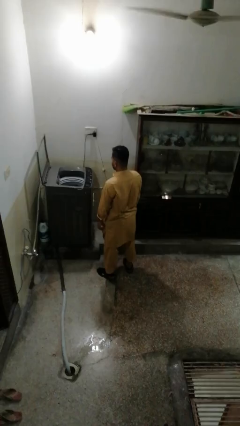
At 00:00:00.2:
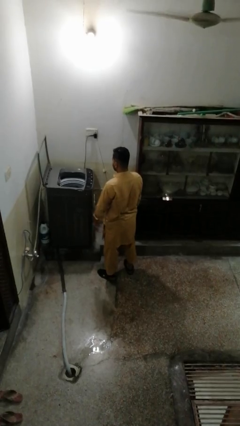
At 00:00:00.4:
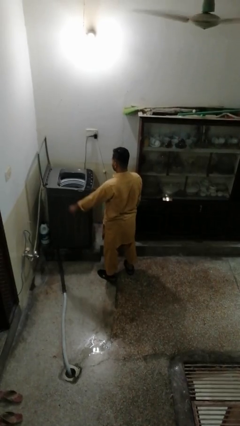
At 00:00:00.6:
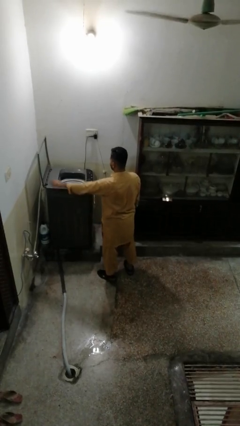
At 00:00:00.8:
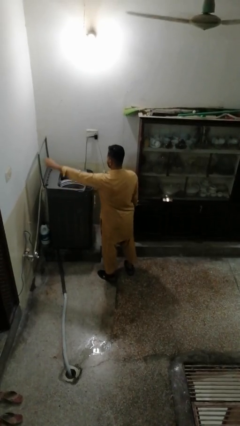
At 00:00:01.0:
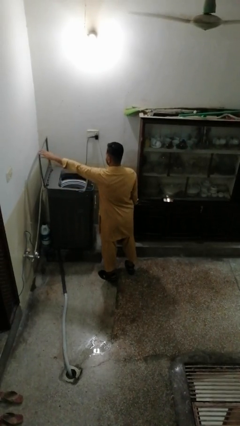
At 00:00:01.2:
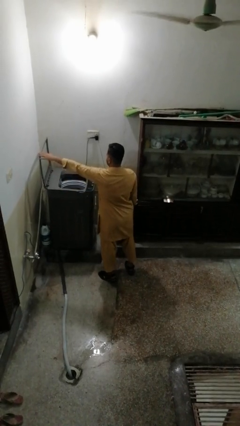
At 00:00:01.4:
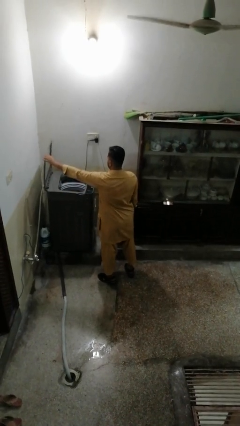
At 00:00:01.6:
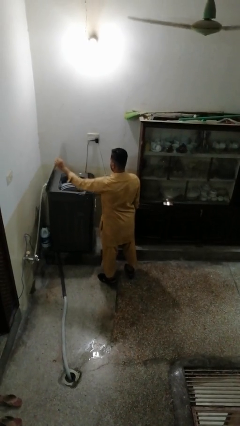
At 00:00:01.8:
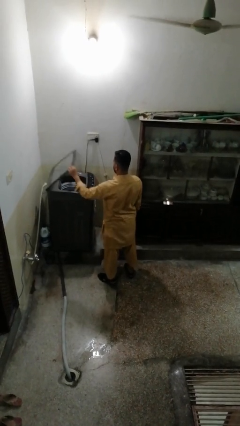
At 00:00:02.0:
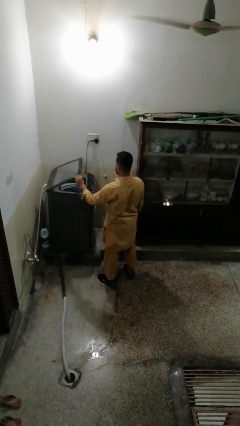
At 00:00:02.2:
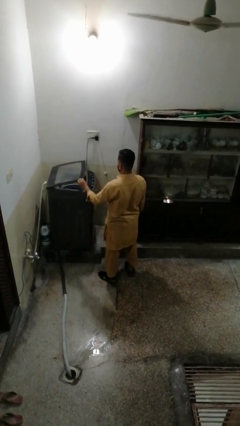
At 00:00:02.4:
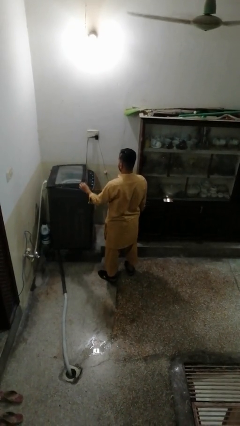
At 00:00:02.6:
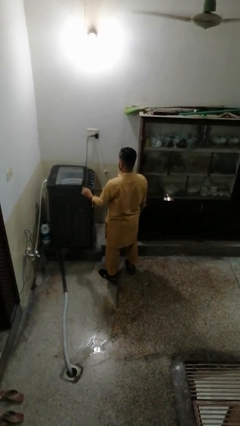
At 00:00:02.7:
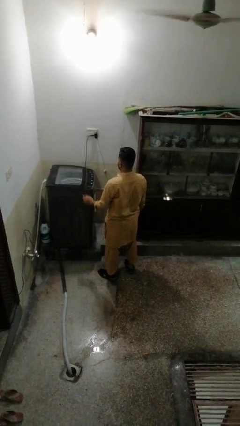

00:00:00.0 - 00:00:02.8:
person closes clothes washer

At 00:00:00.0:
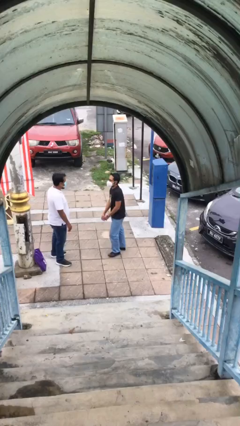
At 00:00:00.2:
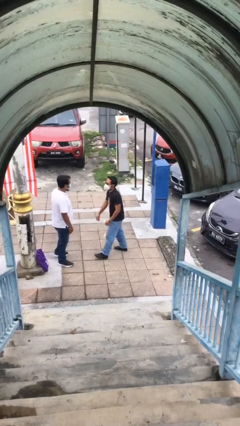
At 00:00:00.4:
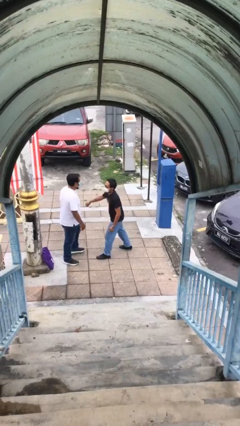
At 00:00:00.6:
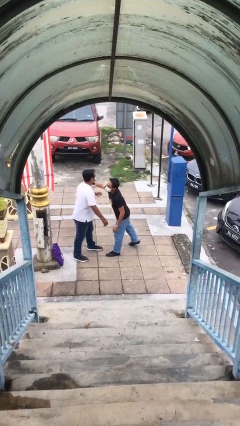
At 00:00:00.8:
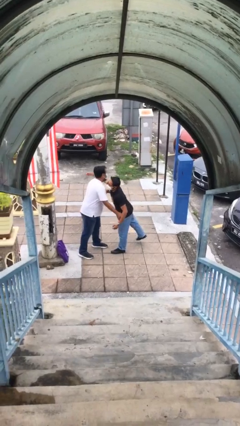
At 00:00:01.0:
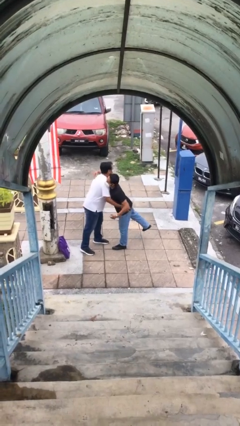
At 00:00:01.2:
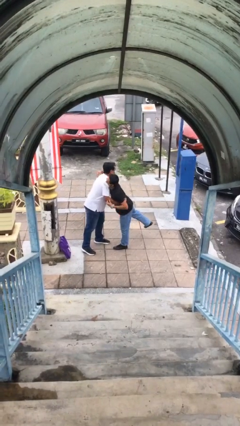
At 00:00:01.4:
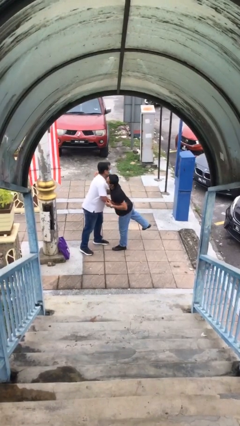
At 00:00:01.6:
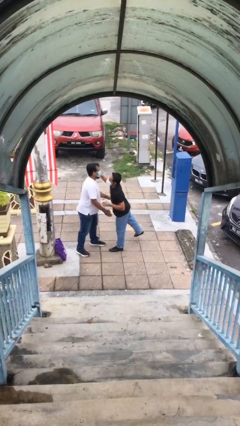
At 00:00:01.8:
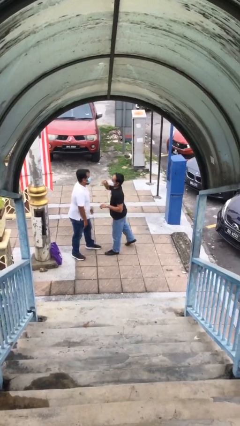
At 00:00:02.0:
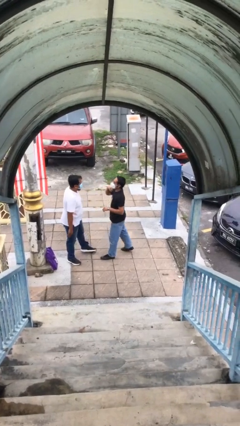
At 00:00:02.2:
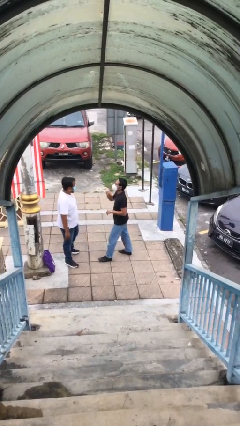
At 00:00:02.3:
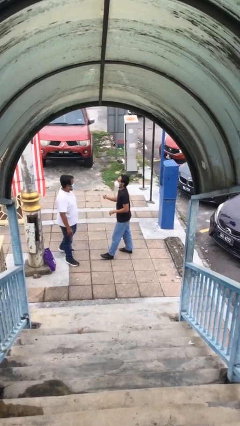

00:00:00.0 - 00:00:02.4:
person embraces person

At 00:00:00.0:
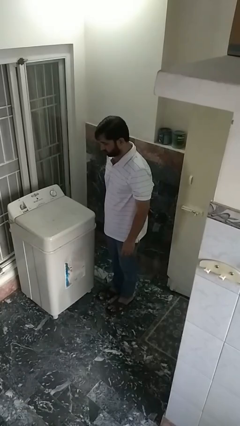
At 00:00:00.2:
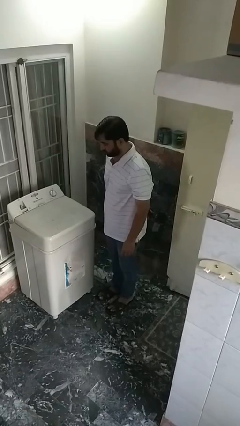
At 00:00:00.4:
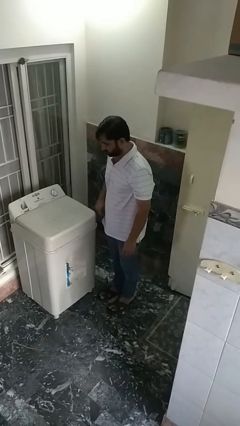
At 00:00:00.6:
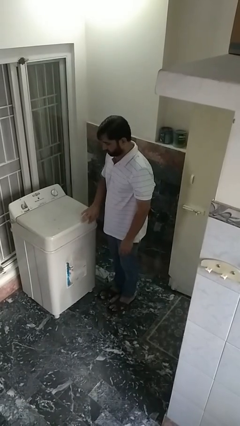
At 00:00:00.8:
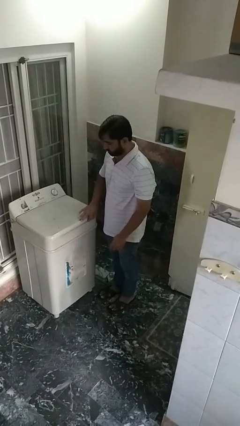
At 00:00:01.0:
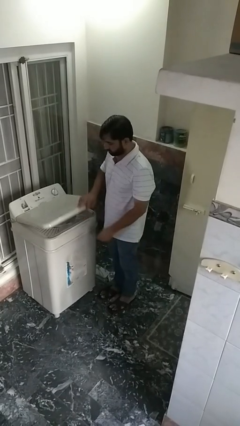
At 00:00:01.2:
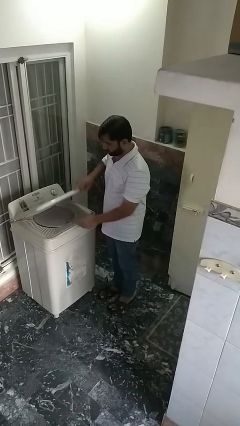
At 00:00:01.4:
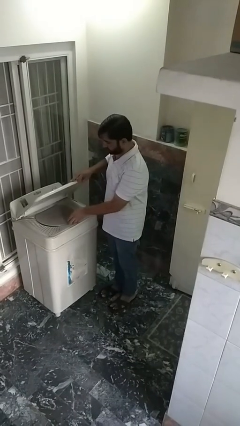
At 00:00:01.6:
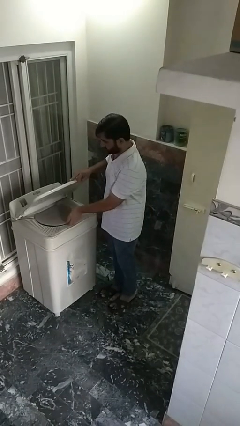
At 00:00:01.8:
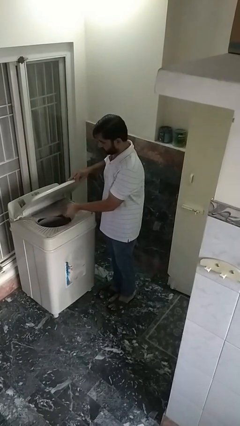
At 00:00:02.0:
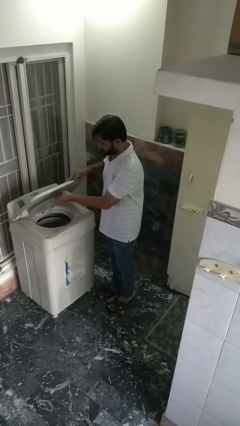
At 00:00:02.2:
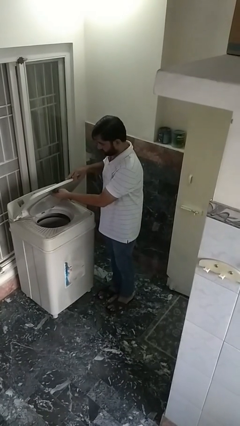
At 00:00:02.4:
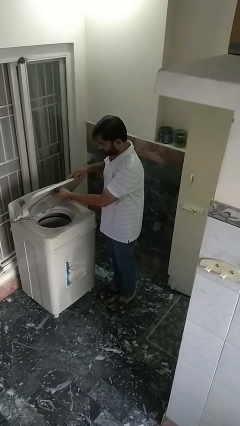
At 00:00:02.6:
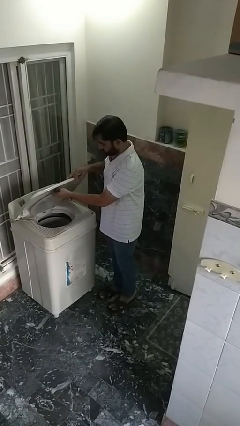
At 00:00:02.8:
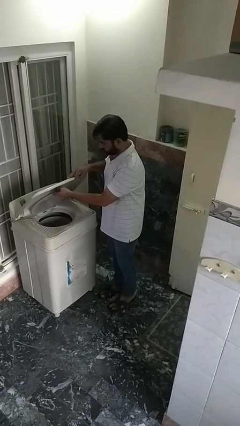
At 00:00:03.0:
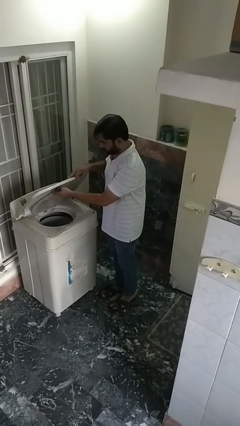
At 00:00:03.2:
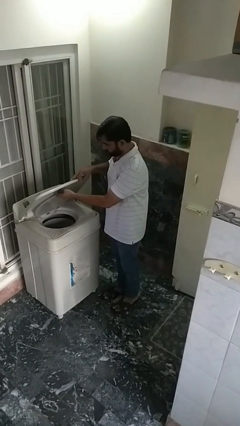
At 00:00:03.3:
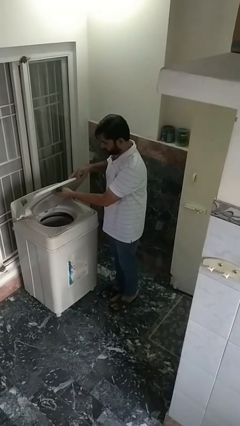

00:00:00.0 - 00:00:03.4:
person opens clothes washer

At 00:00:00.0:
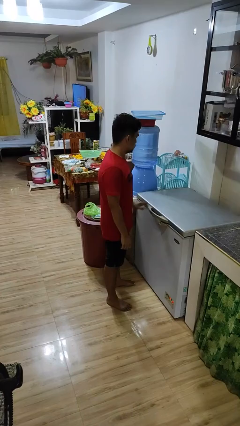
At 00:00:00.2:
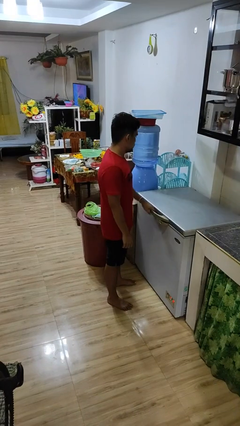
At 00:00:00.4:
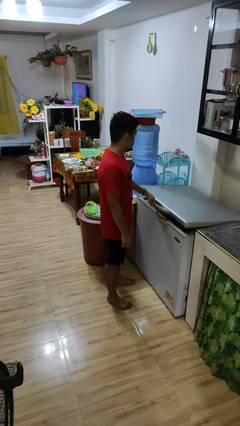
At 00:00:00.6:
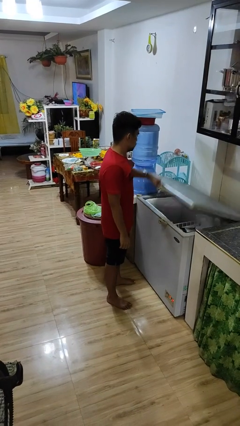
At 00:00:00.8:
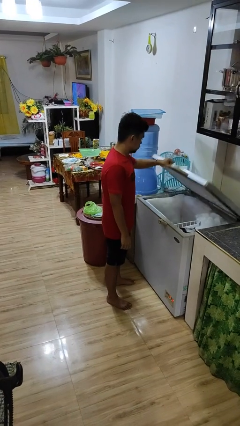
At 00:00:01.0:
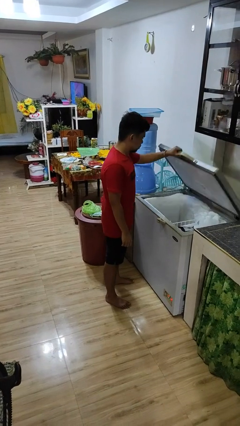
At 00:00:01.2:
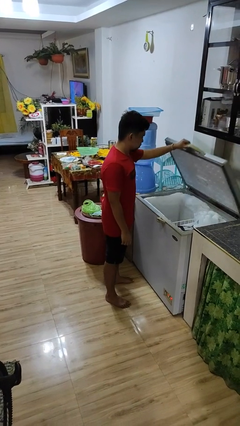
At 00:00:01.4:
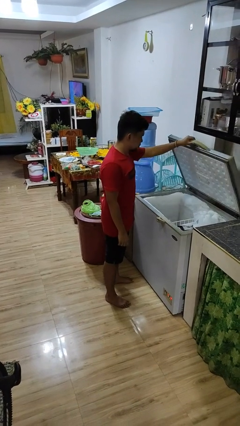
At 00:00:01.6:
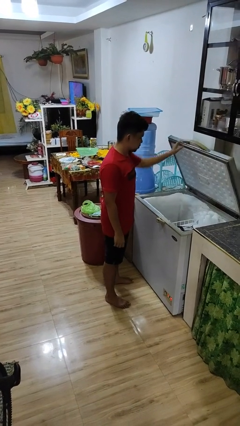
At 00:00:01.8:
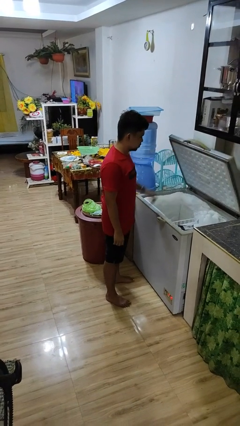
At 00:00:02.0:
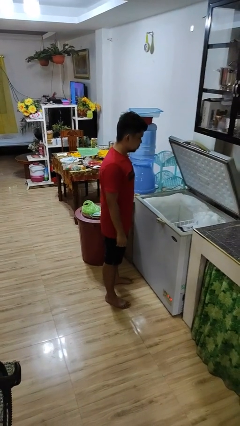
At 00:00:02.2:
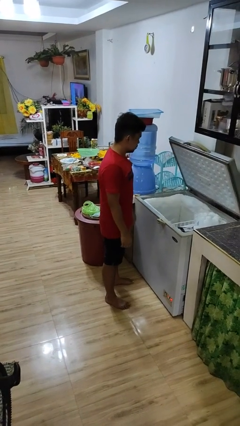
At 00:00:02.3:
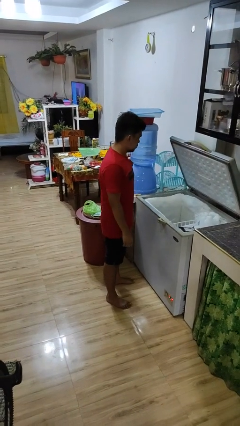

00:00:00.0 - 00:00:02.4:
person opens refrigerator

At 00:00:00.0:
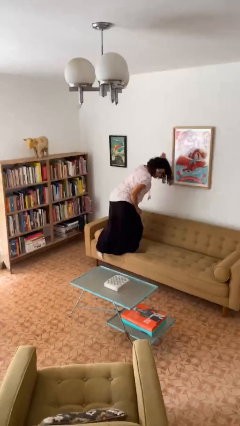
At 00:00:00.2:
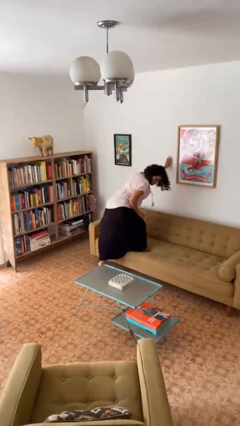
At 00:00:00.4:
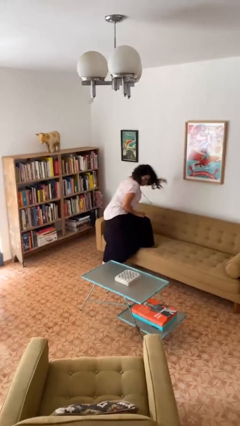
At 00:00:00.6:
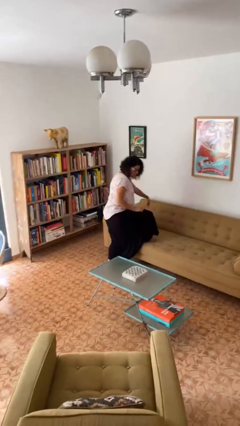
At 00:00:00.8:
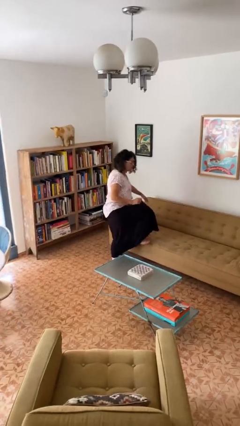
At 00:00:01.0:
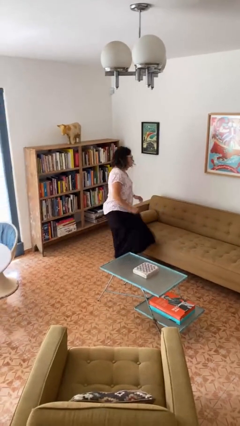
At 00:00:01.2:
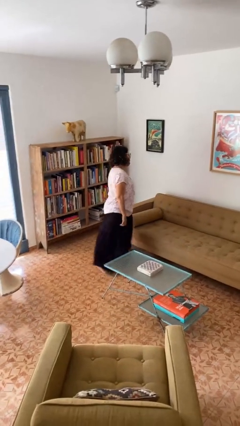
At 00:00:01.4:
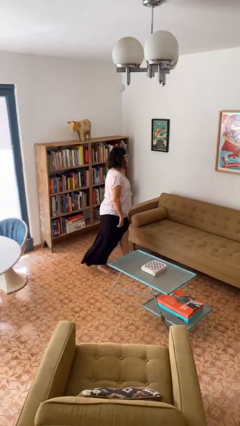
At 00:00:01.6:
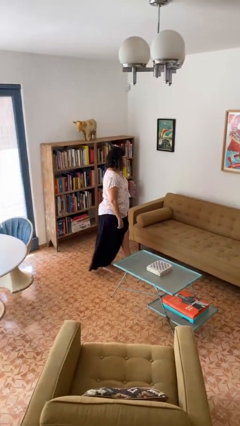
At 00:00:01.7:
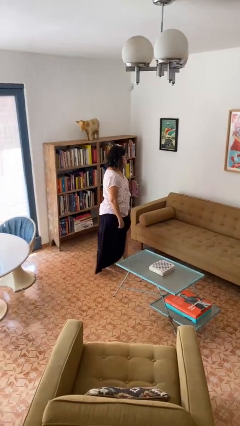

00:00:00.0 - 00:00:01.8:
person climbs off couch

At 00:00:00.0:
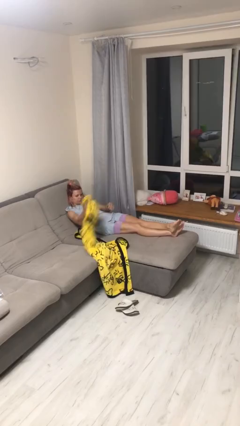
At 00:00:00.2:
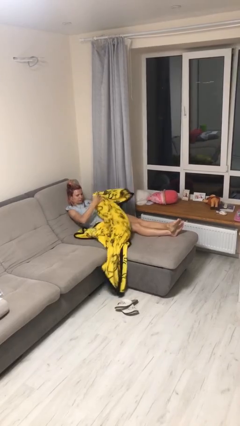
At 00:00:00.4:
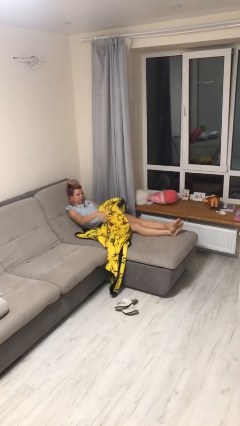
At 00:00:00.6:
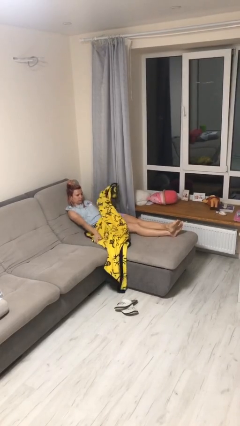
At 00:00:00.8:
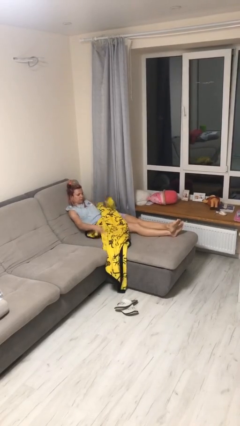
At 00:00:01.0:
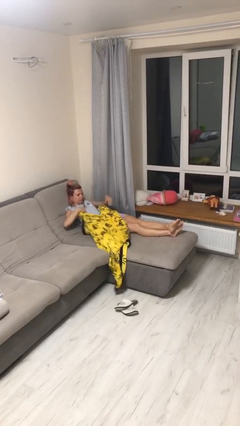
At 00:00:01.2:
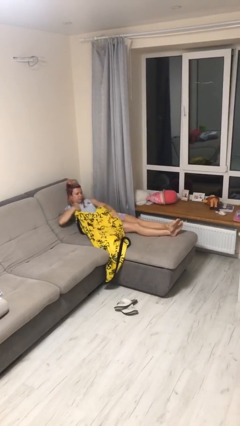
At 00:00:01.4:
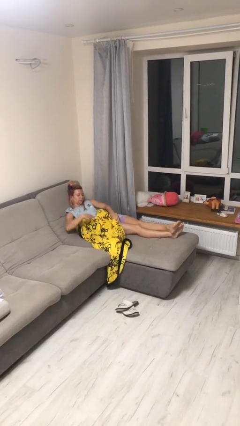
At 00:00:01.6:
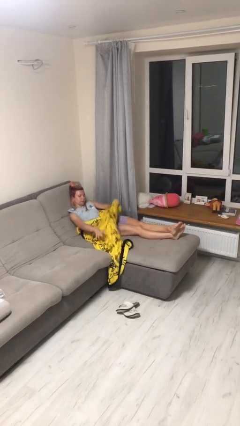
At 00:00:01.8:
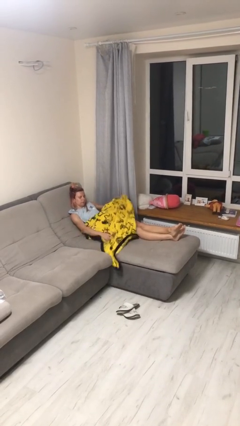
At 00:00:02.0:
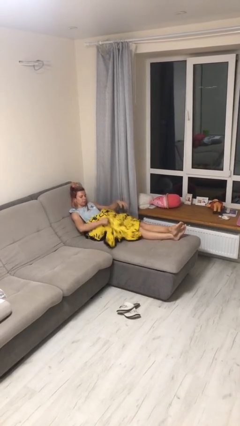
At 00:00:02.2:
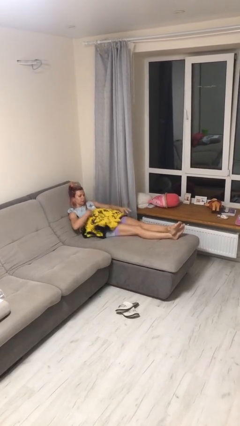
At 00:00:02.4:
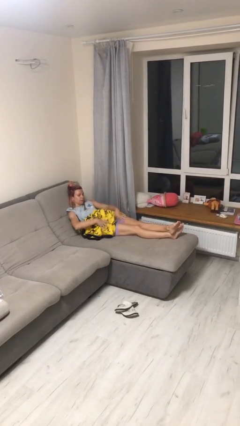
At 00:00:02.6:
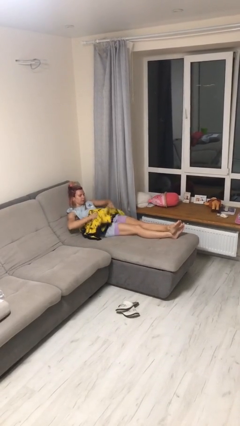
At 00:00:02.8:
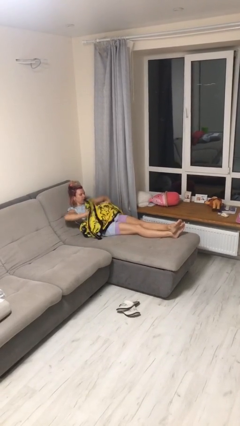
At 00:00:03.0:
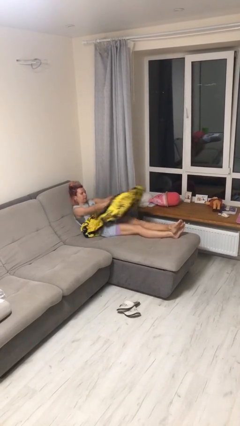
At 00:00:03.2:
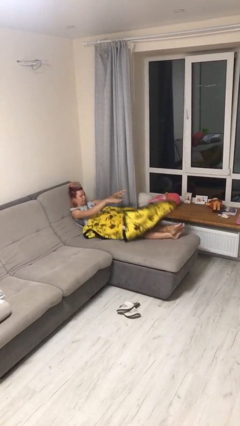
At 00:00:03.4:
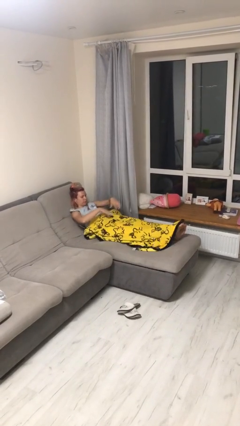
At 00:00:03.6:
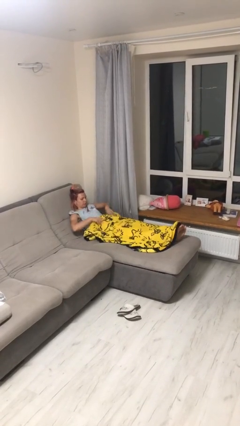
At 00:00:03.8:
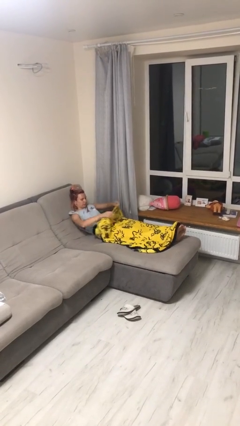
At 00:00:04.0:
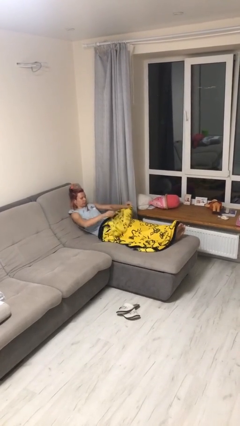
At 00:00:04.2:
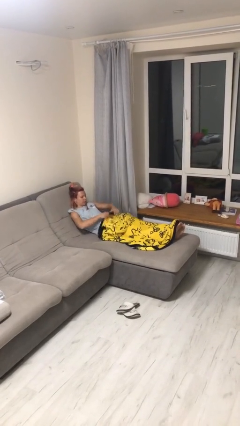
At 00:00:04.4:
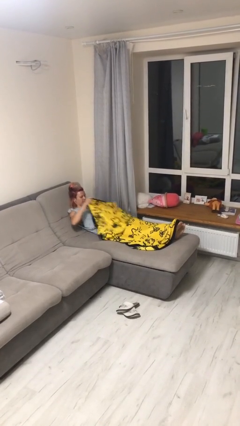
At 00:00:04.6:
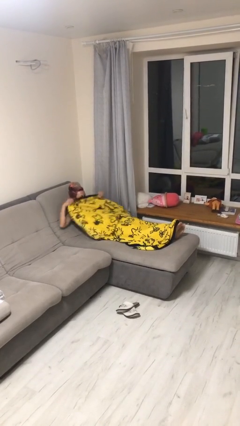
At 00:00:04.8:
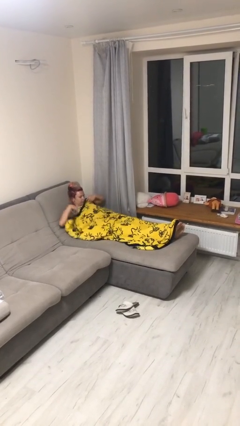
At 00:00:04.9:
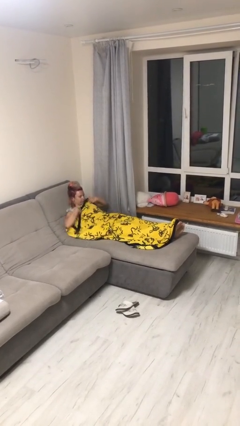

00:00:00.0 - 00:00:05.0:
person covers with blanket
